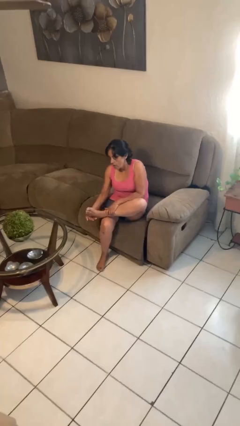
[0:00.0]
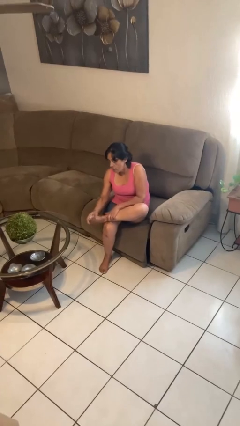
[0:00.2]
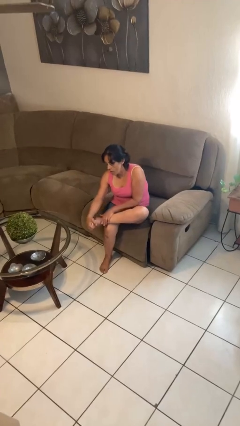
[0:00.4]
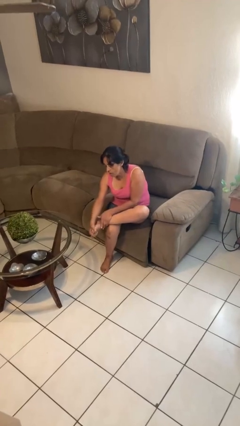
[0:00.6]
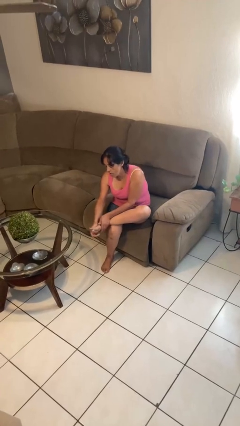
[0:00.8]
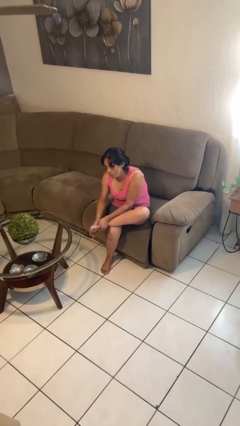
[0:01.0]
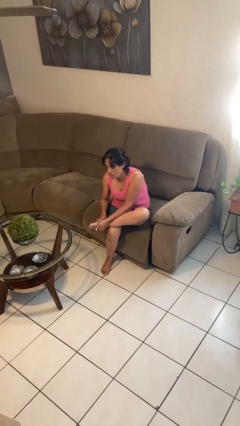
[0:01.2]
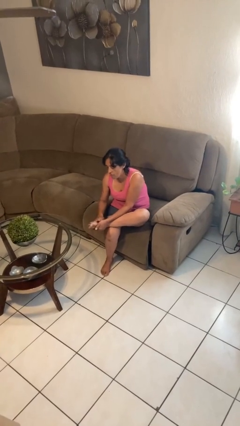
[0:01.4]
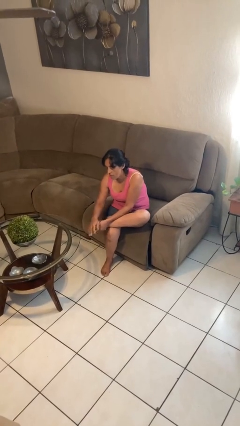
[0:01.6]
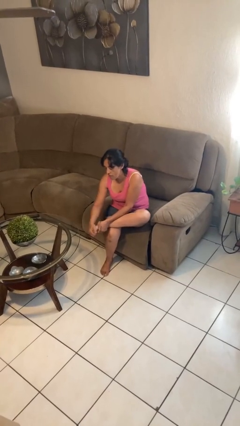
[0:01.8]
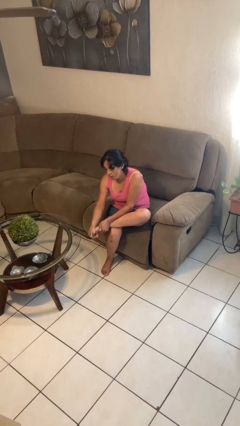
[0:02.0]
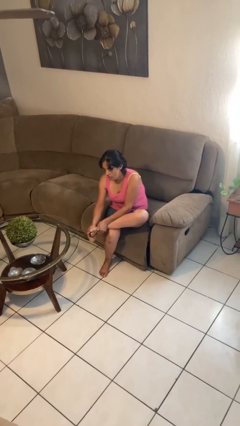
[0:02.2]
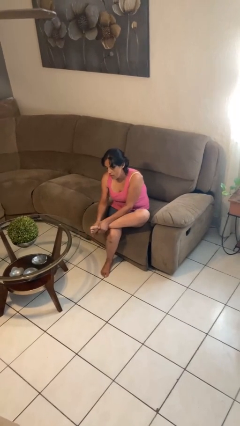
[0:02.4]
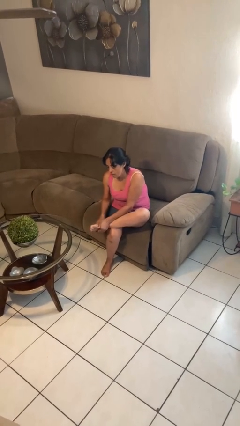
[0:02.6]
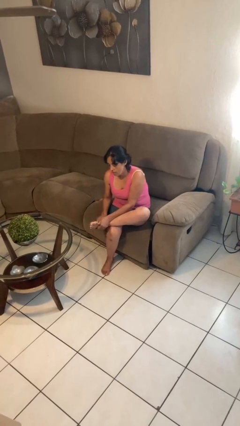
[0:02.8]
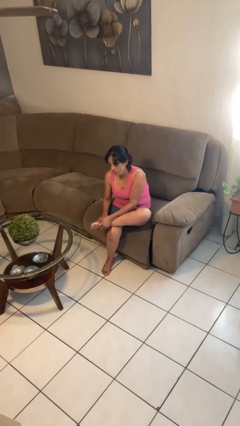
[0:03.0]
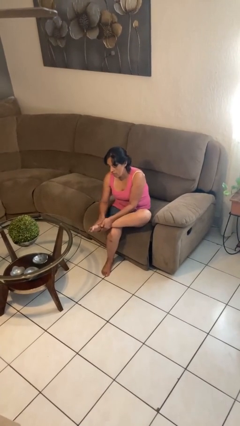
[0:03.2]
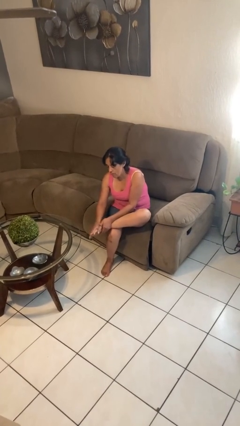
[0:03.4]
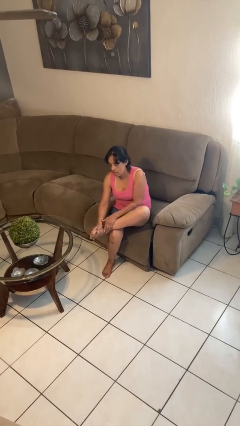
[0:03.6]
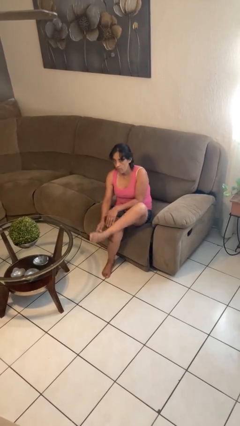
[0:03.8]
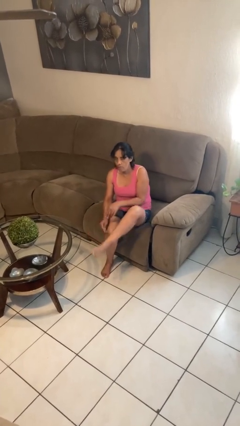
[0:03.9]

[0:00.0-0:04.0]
person rubs foot

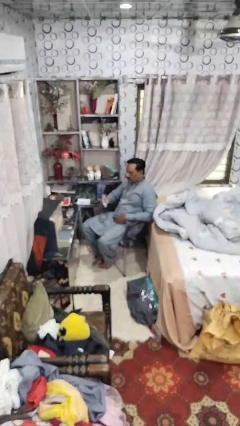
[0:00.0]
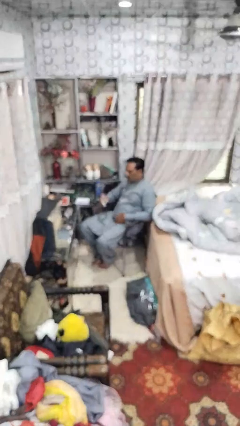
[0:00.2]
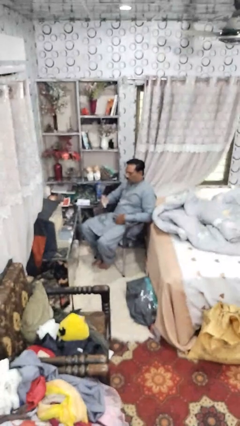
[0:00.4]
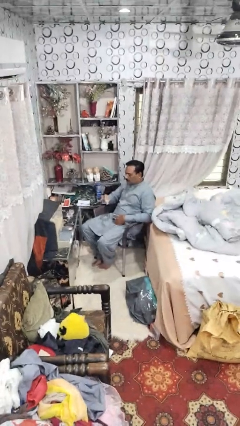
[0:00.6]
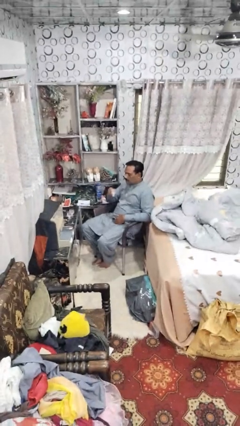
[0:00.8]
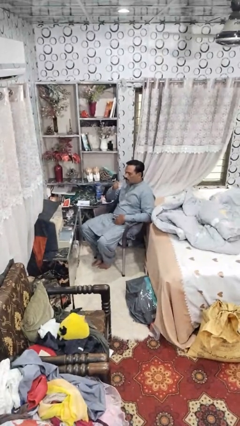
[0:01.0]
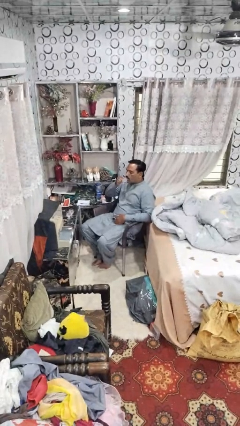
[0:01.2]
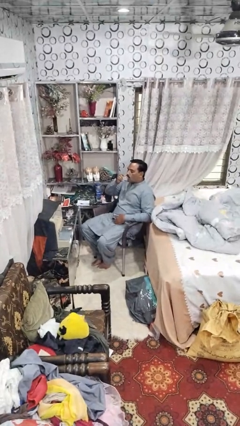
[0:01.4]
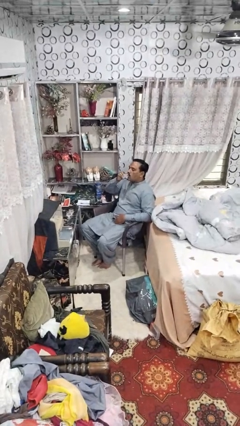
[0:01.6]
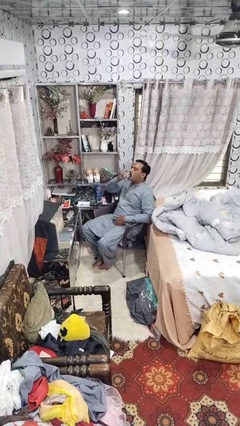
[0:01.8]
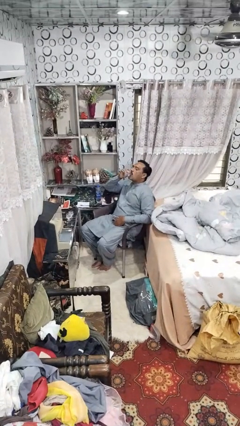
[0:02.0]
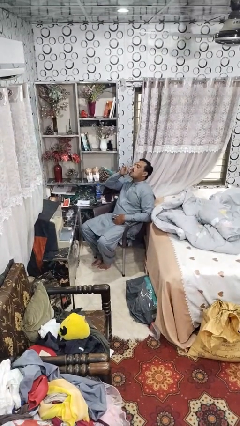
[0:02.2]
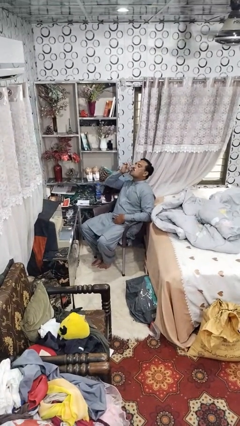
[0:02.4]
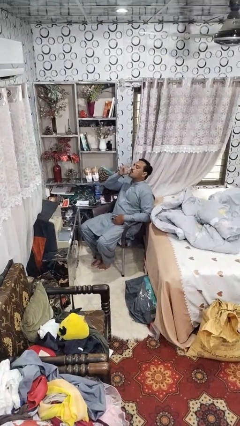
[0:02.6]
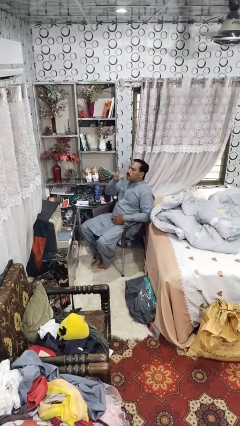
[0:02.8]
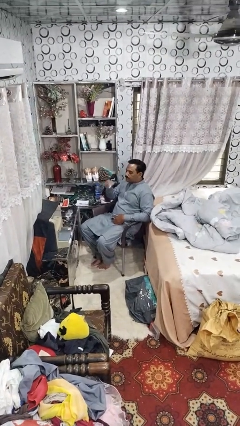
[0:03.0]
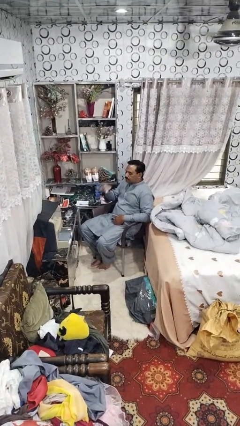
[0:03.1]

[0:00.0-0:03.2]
person drinks from shotglass

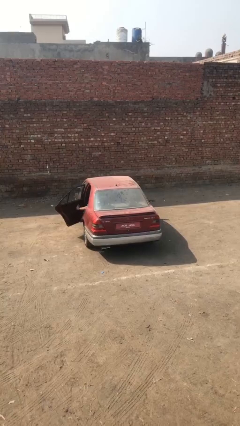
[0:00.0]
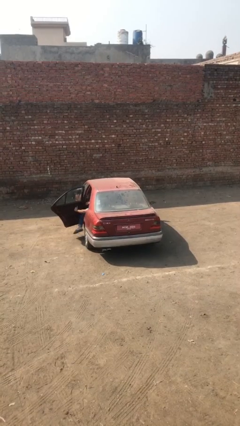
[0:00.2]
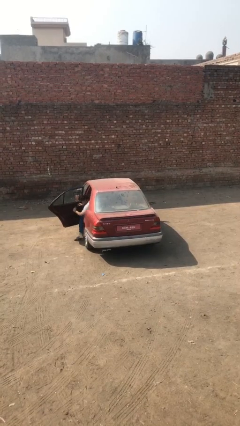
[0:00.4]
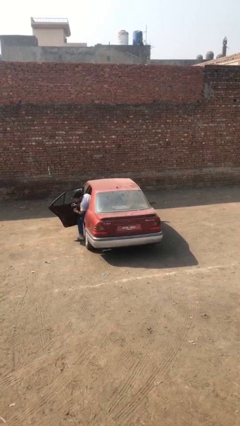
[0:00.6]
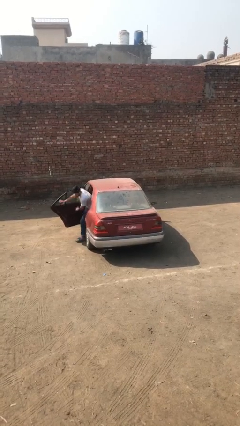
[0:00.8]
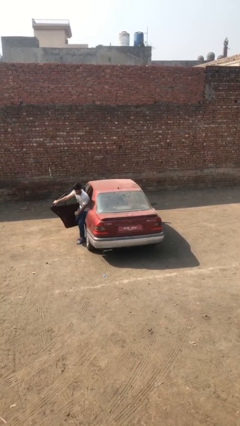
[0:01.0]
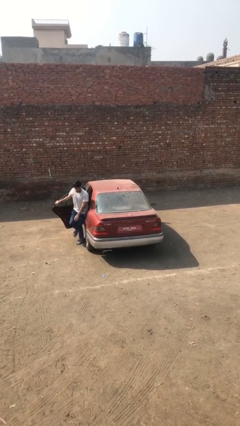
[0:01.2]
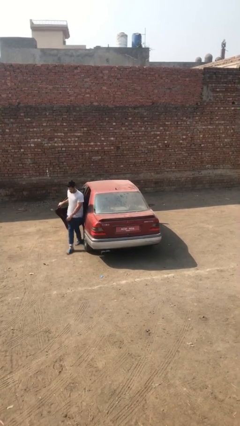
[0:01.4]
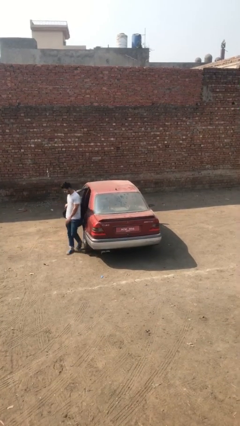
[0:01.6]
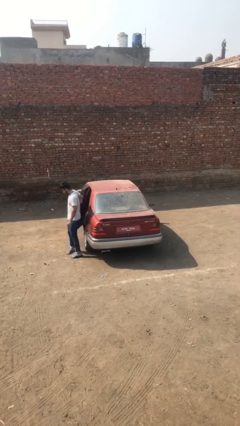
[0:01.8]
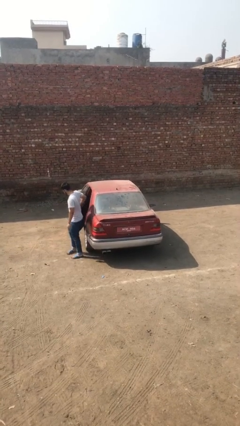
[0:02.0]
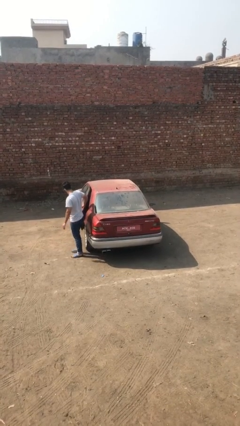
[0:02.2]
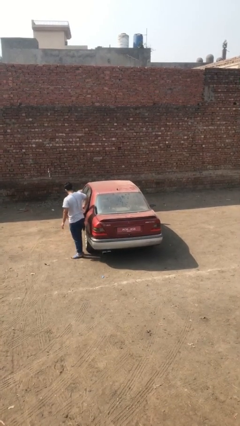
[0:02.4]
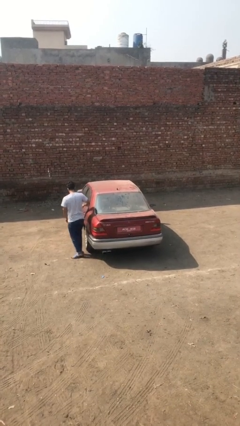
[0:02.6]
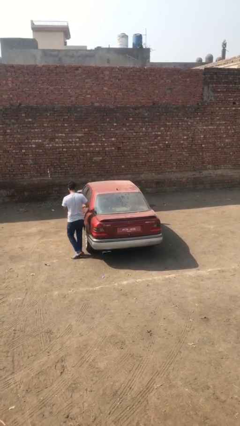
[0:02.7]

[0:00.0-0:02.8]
car drops off person

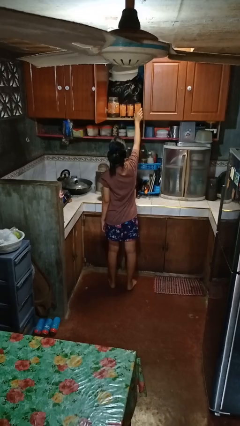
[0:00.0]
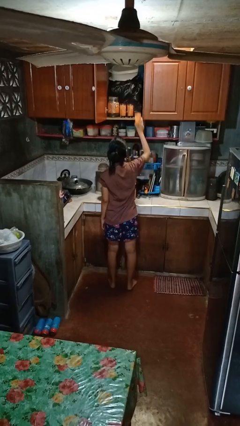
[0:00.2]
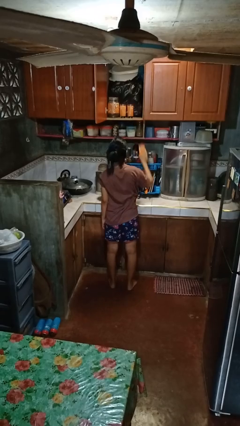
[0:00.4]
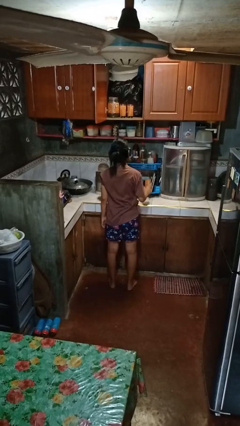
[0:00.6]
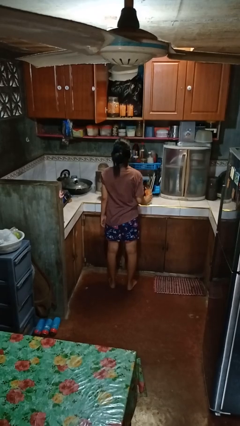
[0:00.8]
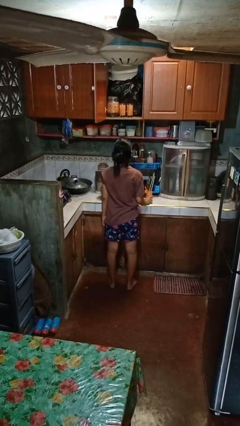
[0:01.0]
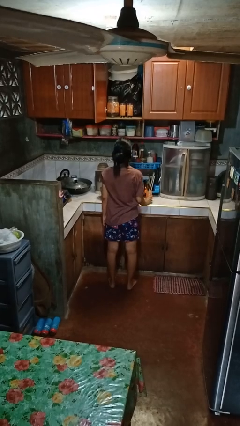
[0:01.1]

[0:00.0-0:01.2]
person takes object from cabinet

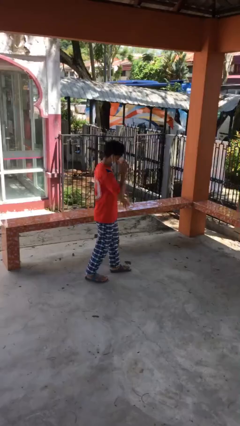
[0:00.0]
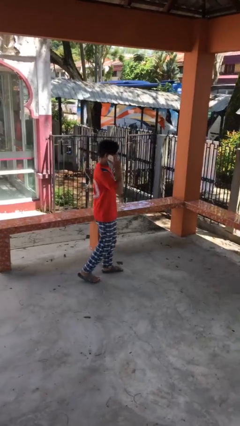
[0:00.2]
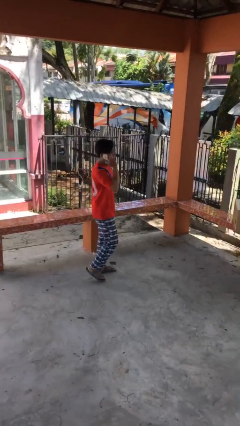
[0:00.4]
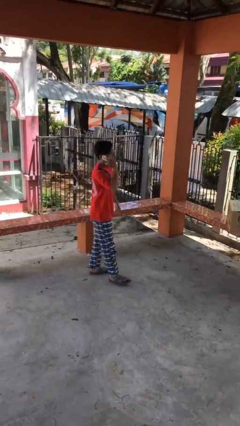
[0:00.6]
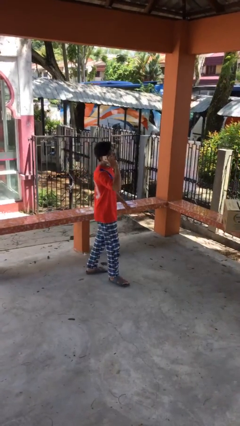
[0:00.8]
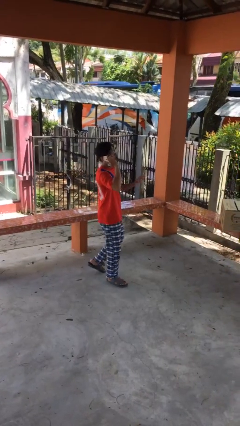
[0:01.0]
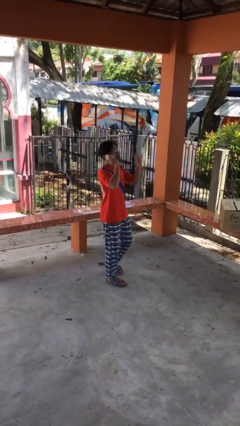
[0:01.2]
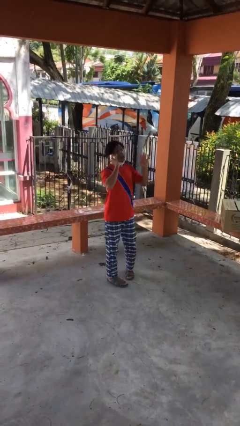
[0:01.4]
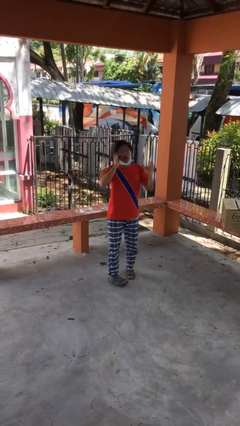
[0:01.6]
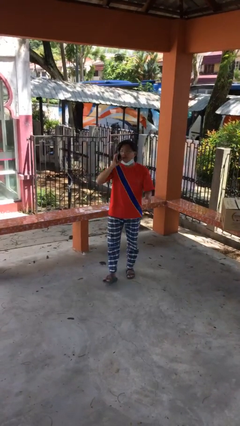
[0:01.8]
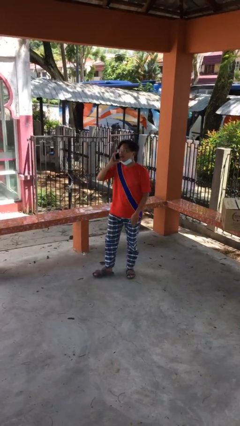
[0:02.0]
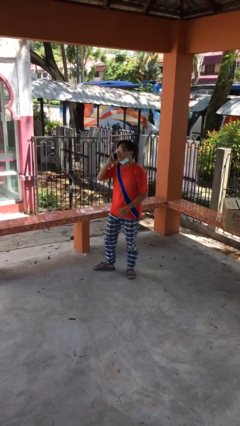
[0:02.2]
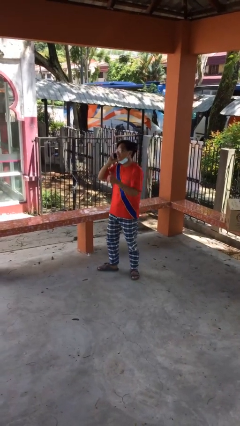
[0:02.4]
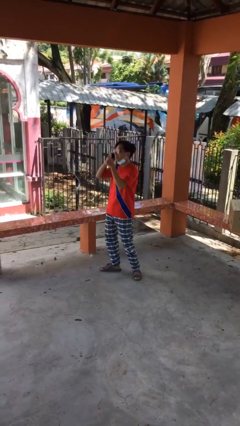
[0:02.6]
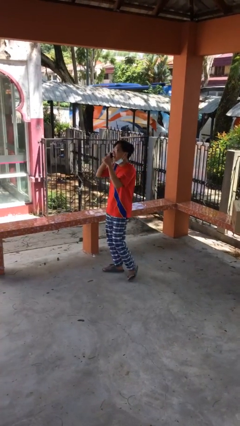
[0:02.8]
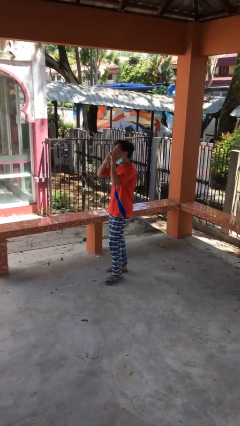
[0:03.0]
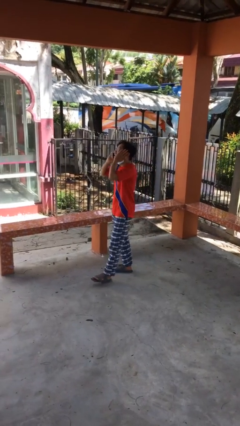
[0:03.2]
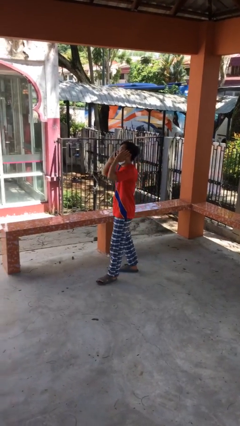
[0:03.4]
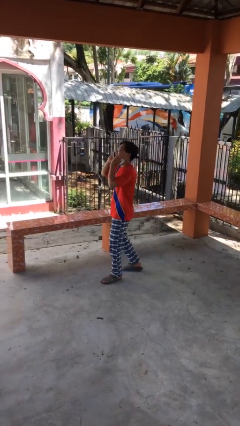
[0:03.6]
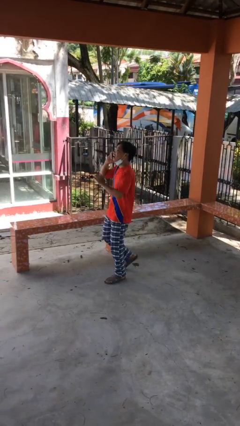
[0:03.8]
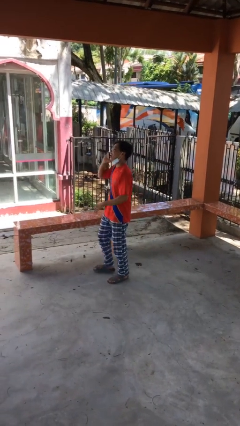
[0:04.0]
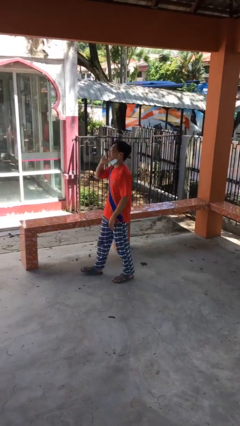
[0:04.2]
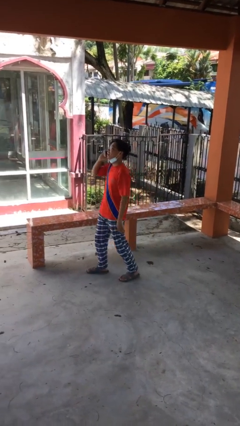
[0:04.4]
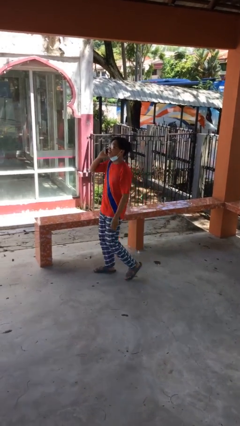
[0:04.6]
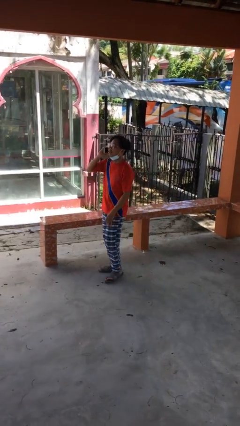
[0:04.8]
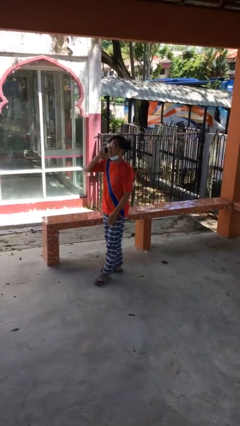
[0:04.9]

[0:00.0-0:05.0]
person talks on phone

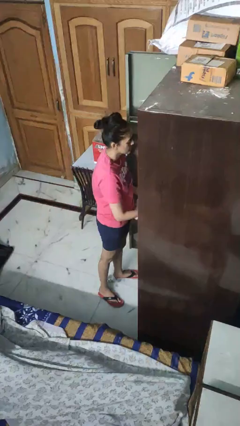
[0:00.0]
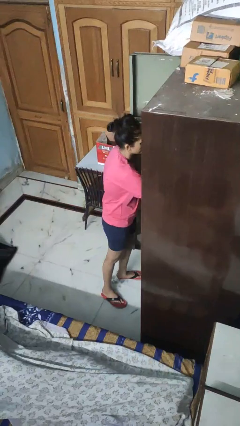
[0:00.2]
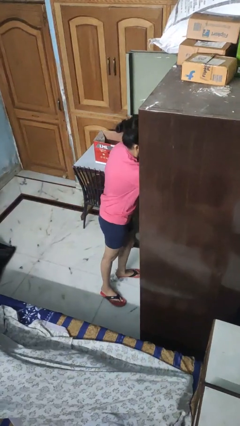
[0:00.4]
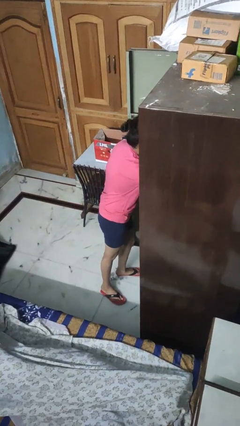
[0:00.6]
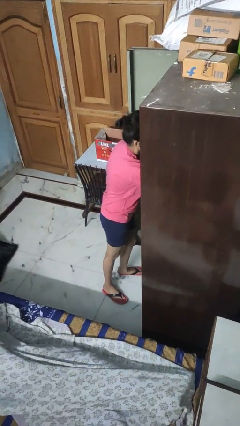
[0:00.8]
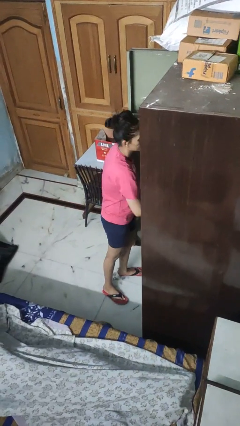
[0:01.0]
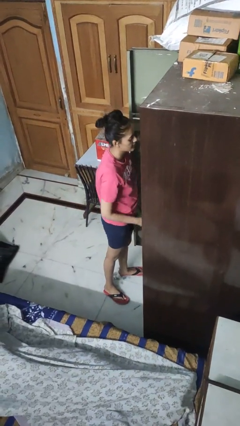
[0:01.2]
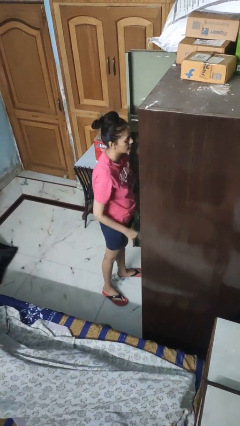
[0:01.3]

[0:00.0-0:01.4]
person puts clothes into dresser
